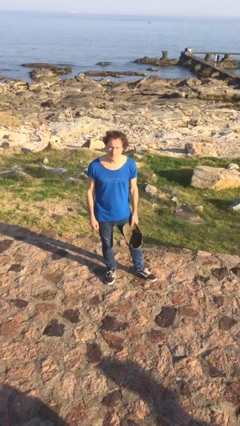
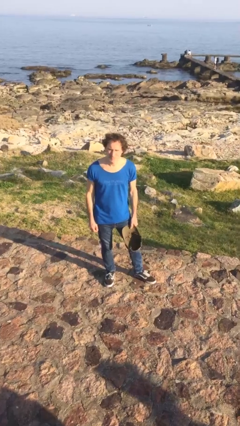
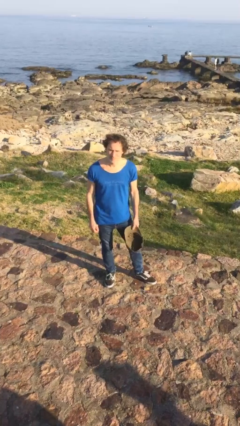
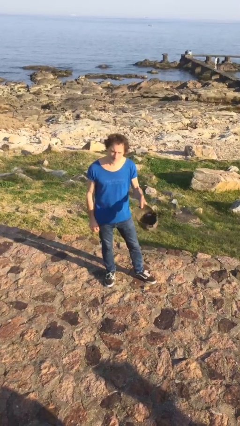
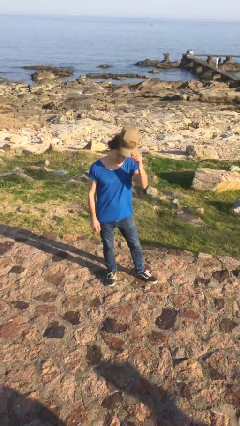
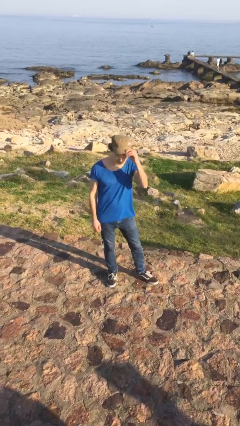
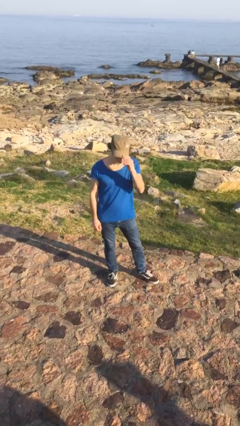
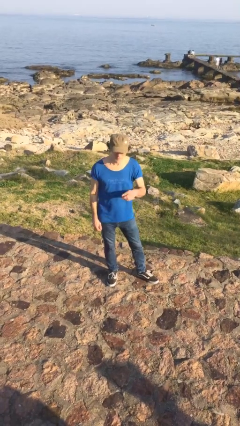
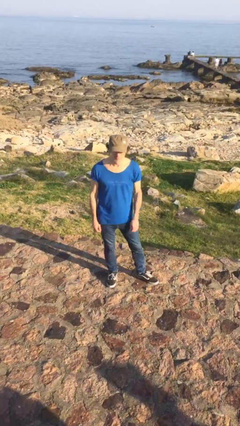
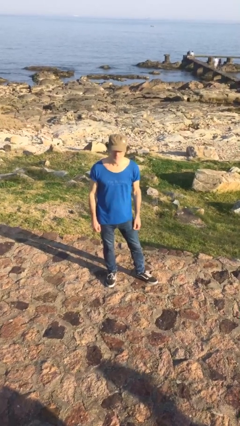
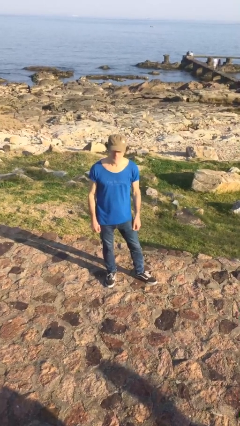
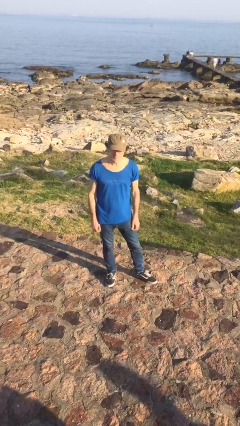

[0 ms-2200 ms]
person puts on hat

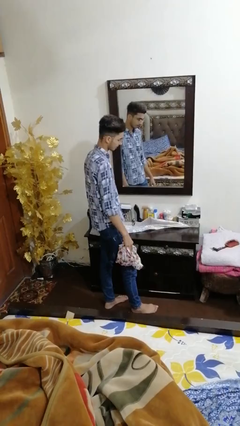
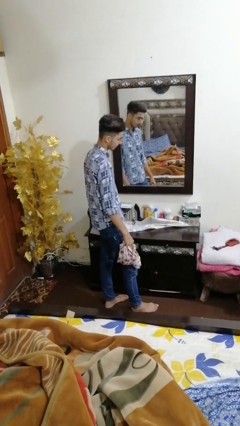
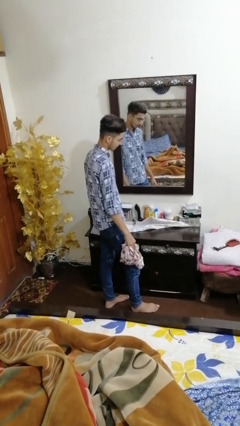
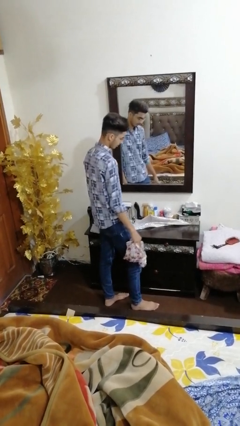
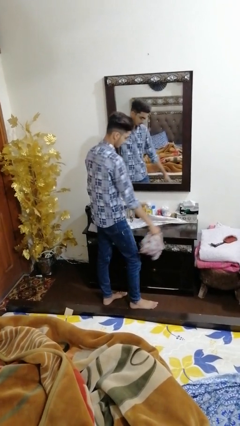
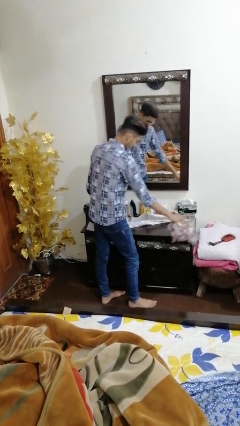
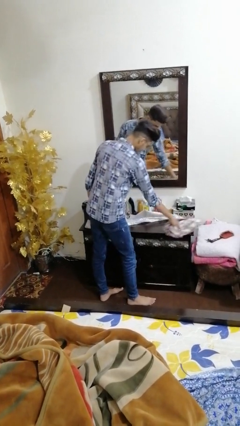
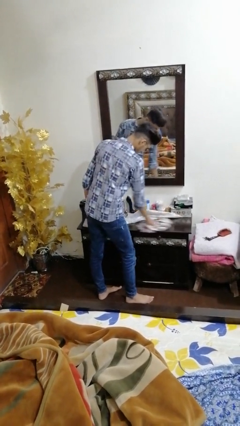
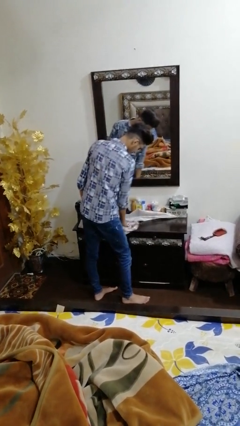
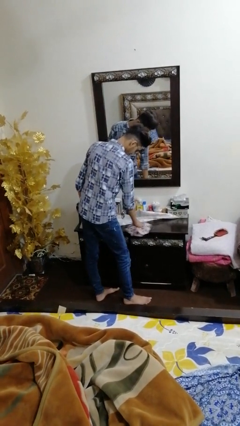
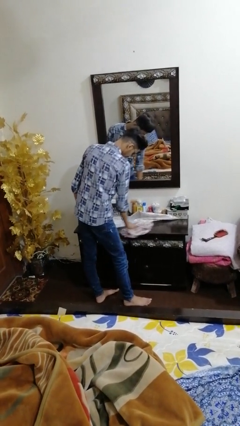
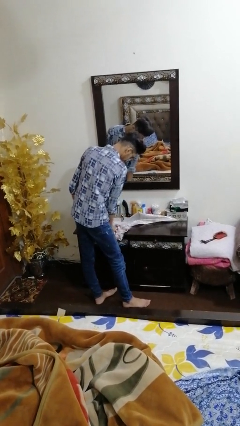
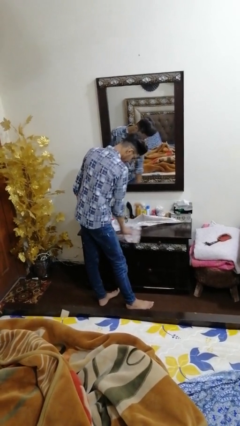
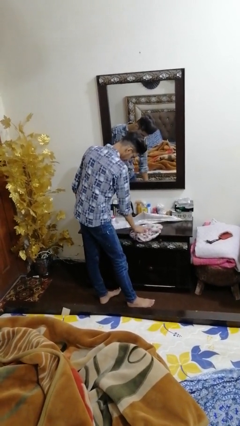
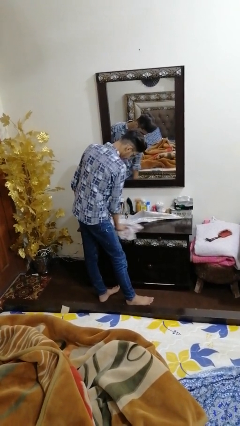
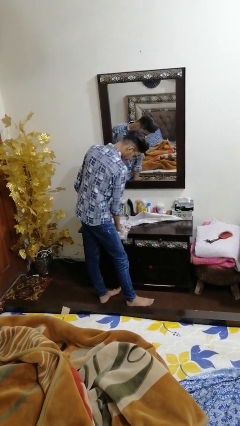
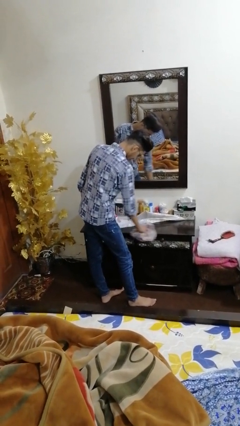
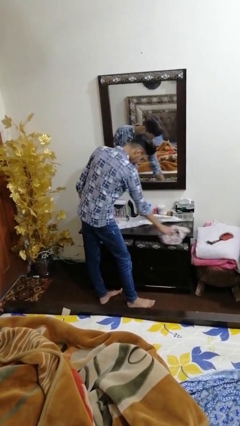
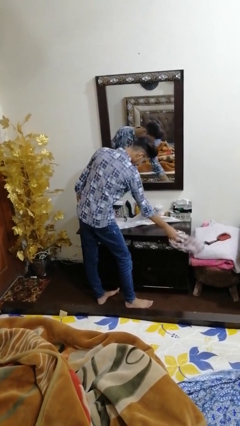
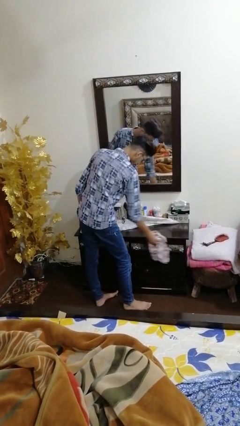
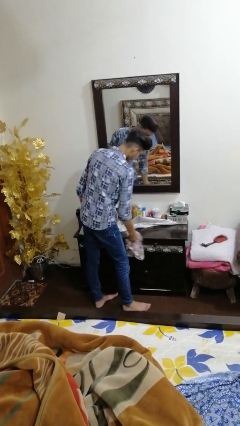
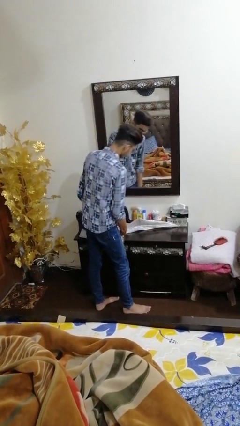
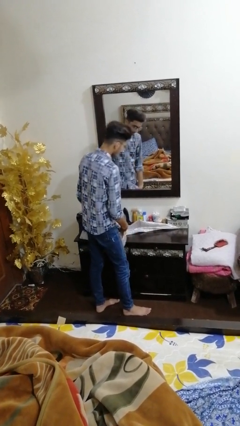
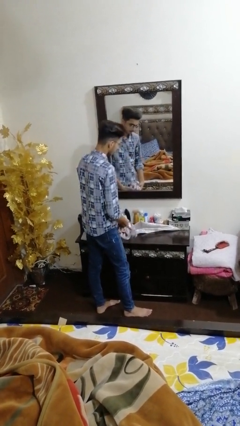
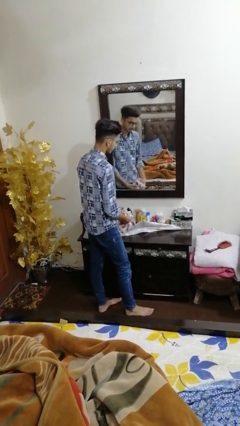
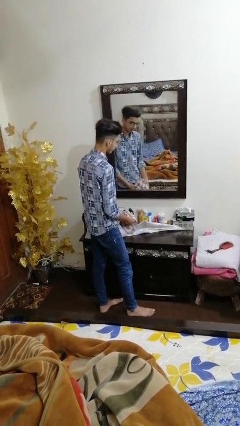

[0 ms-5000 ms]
person cleans table with rag

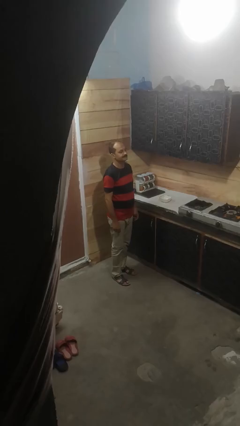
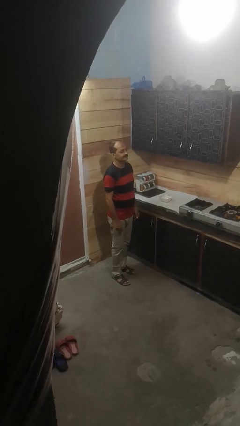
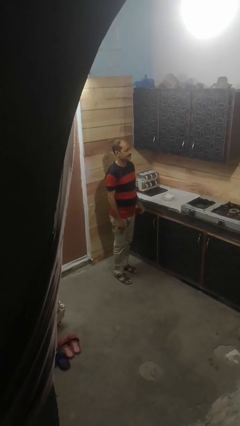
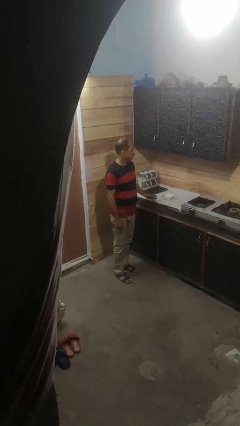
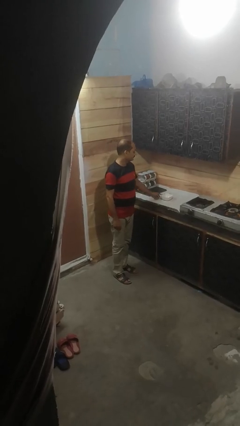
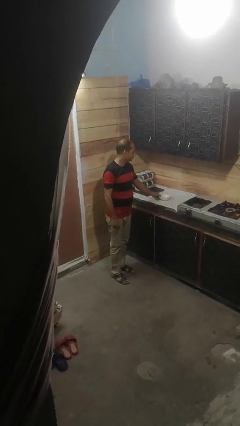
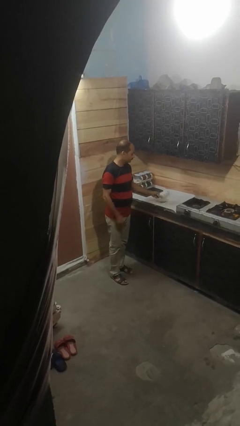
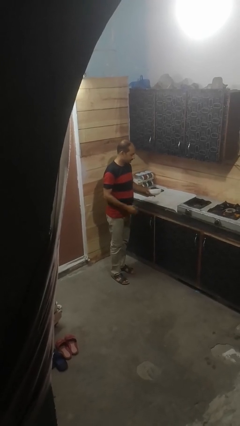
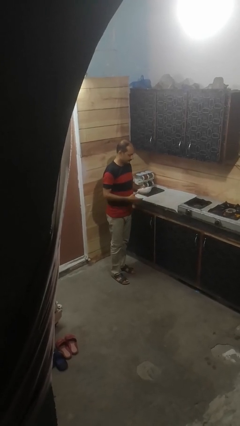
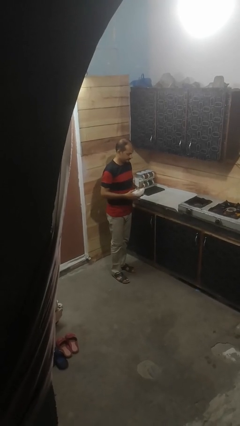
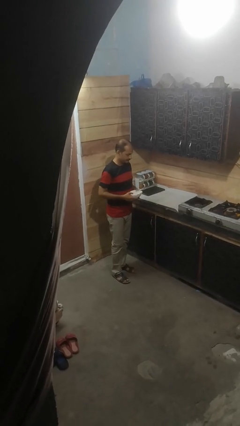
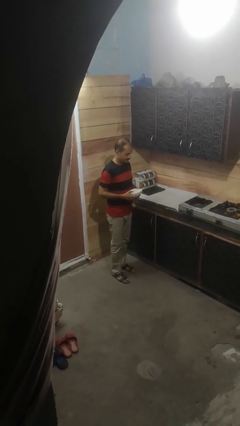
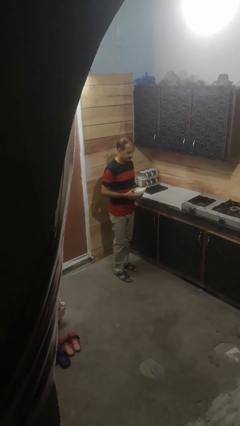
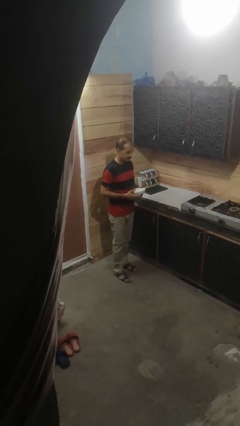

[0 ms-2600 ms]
person picks up object from countertop

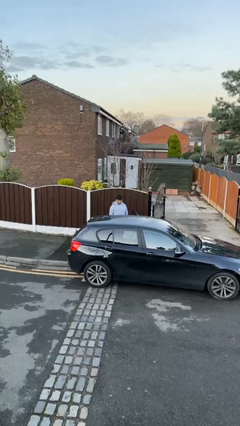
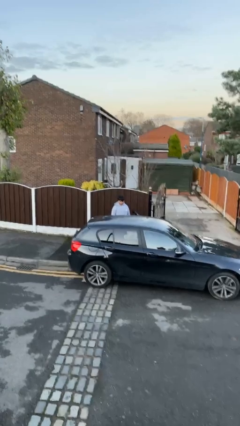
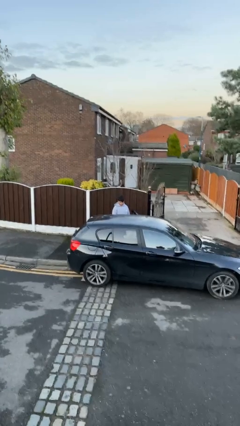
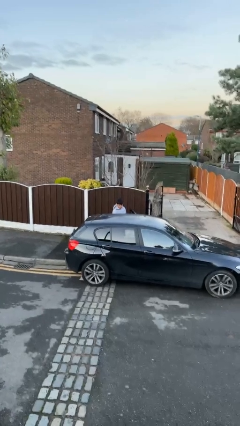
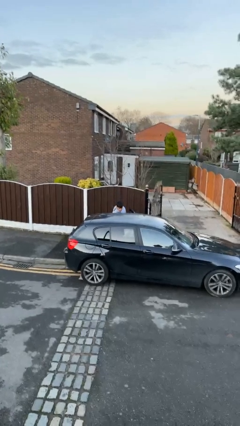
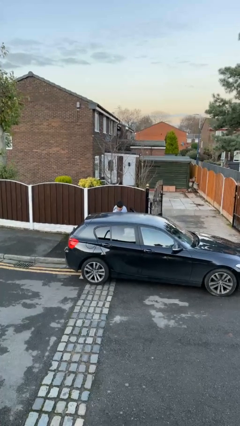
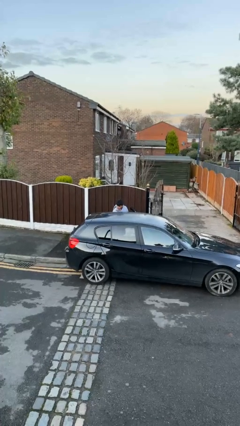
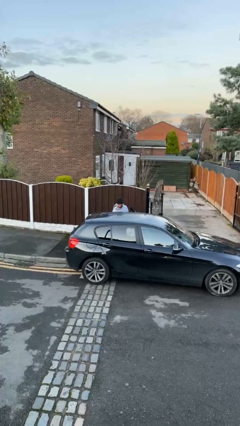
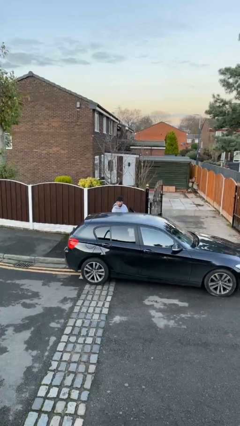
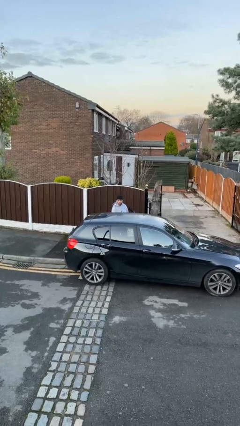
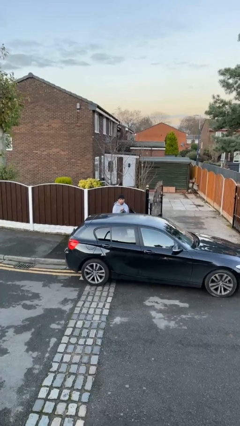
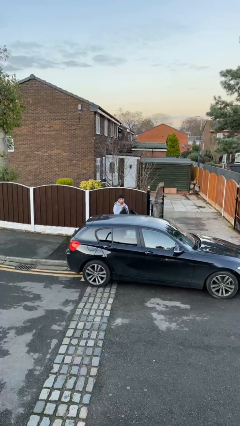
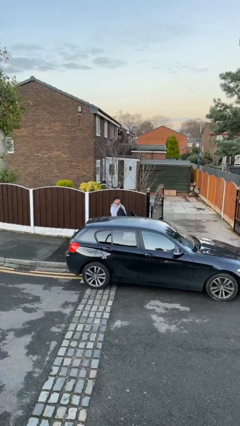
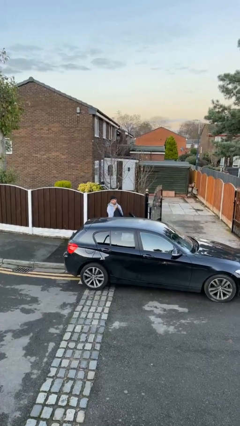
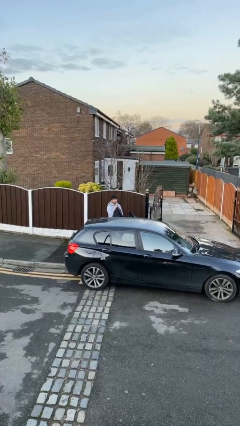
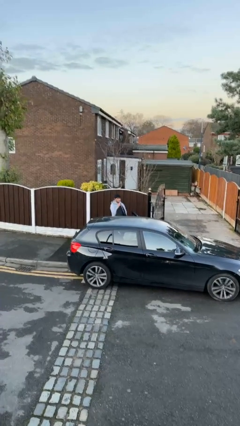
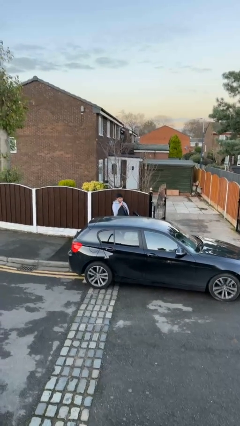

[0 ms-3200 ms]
person unloads car

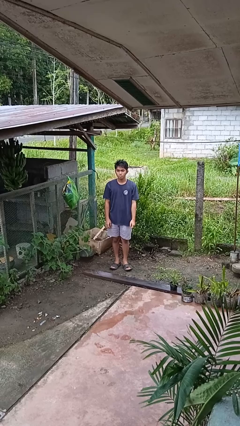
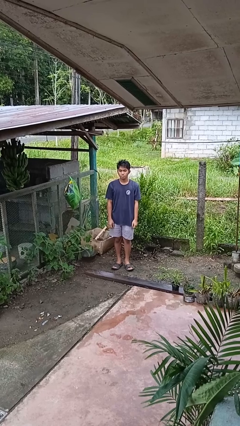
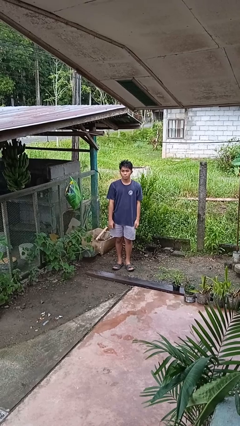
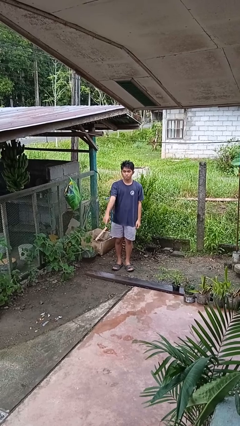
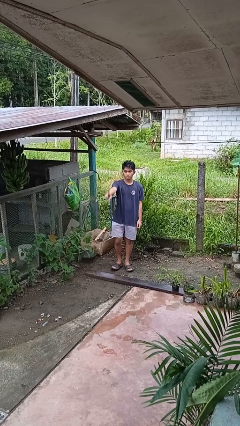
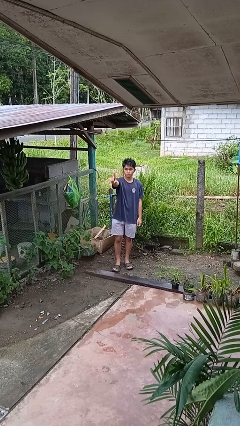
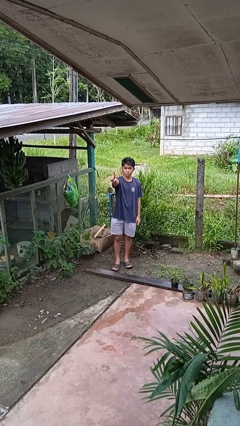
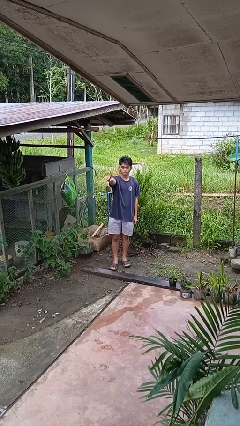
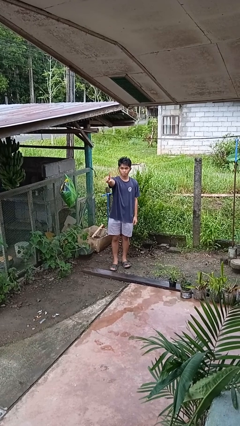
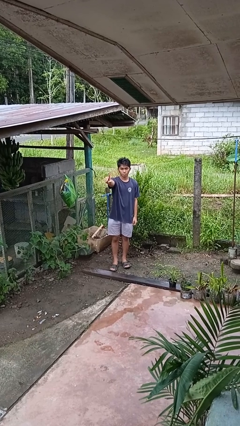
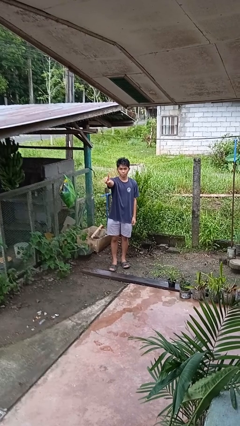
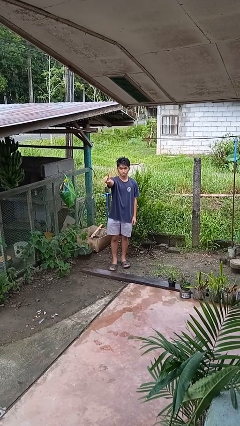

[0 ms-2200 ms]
person gestures number one

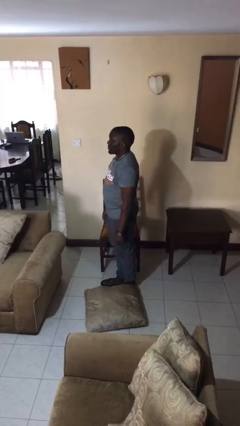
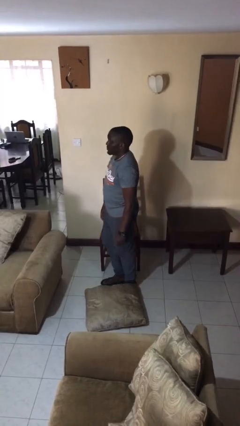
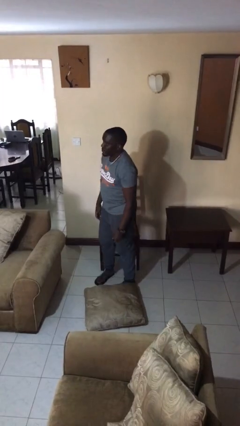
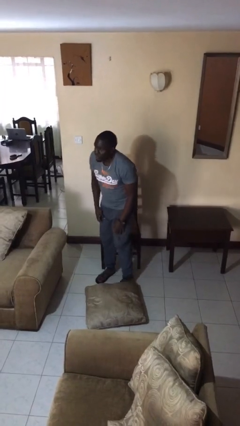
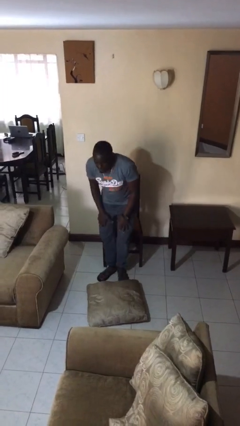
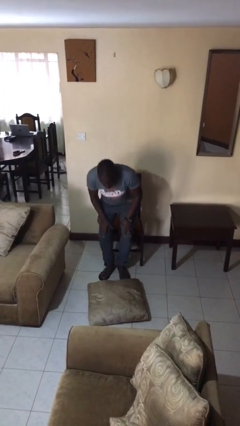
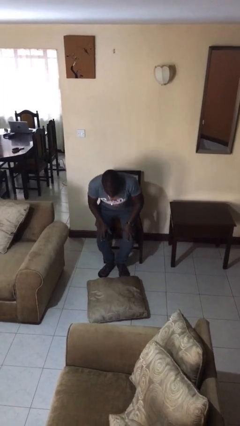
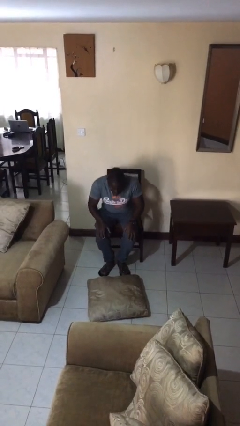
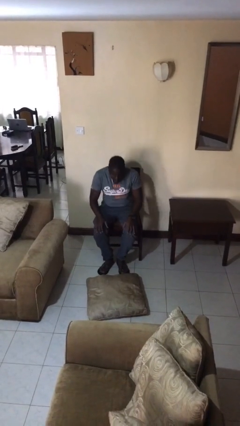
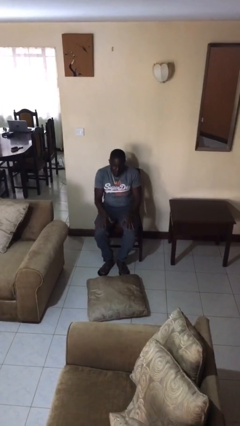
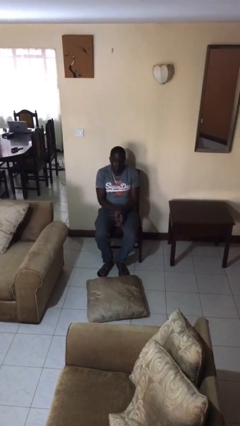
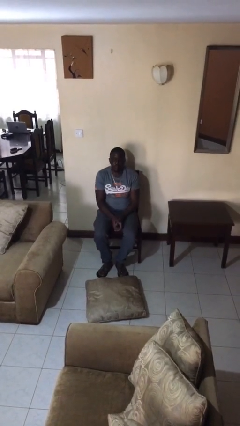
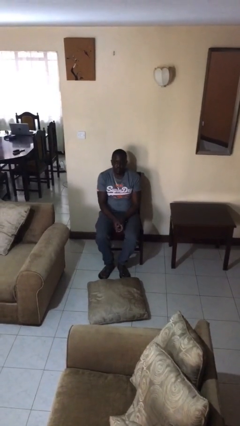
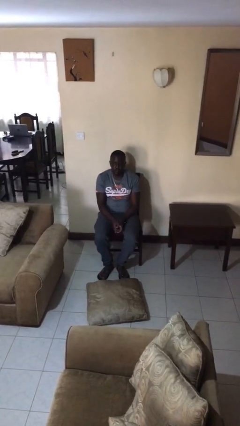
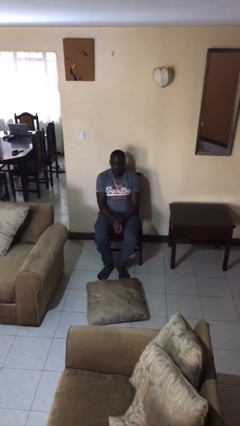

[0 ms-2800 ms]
person sits down
